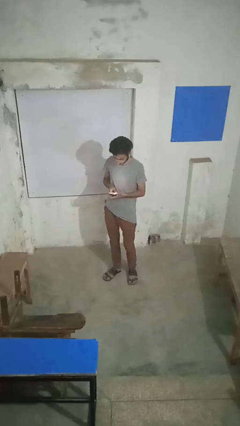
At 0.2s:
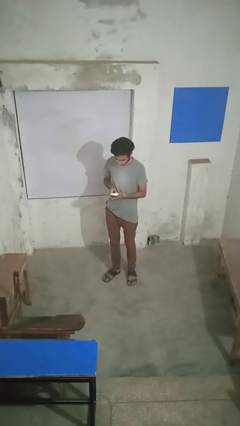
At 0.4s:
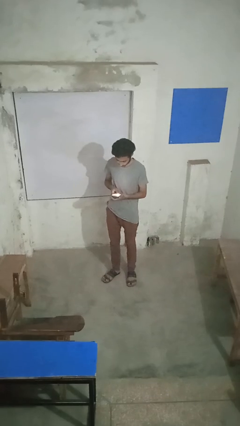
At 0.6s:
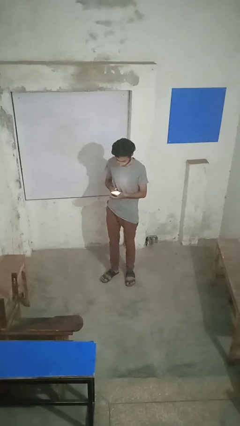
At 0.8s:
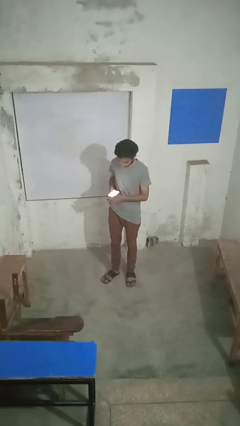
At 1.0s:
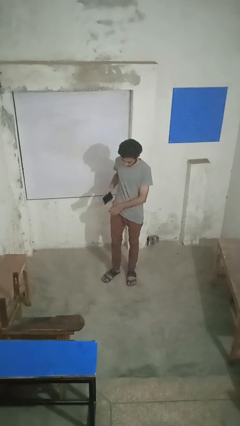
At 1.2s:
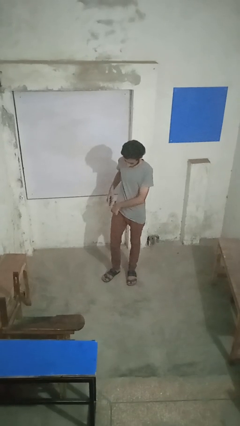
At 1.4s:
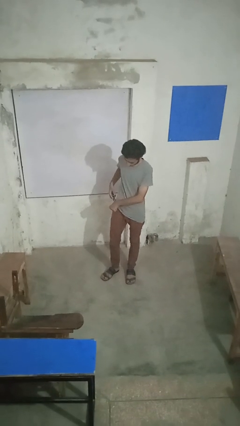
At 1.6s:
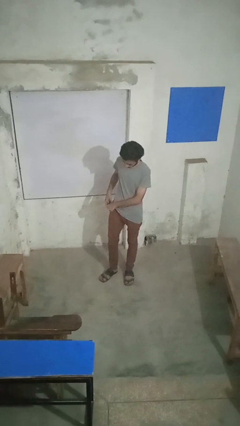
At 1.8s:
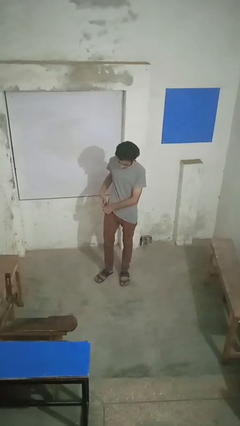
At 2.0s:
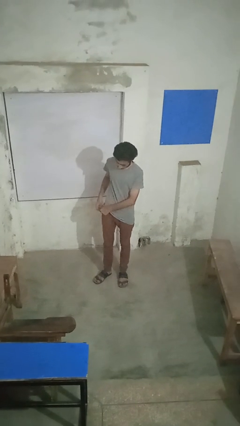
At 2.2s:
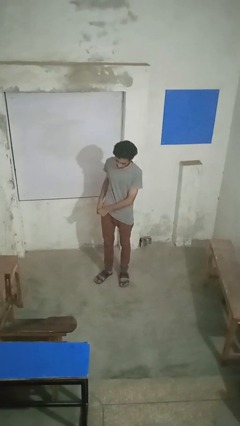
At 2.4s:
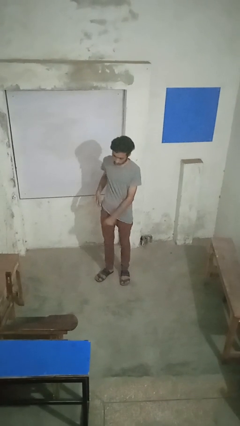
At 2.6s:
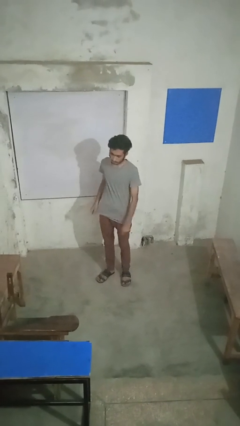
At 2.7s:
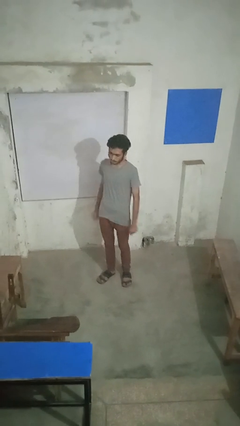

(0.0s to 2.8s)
person puts phone into pocket

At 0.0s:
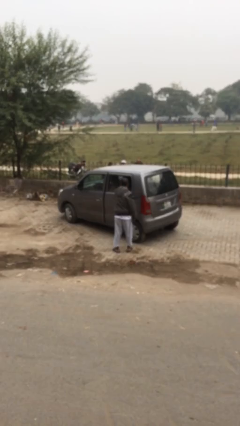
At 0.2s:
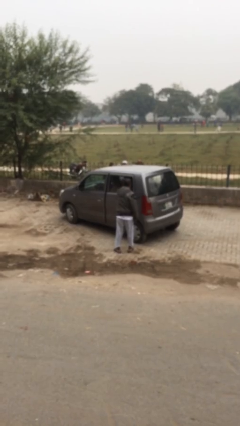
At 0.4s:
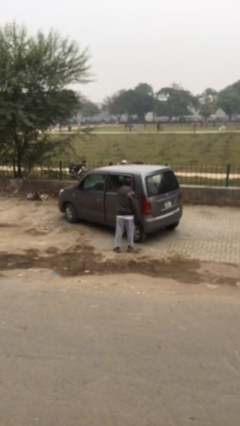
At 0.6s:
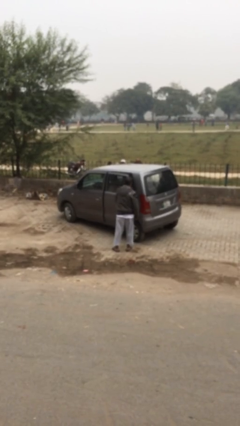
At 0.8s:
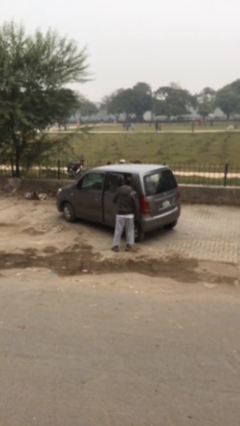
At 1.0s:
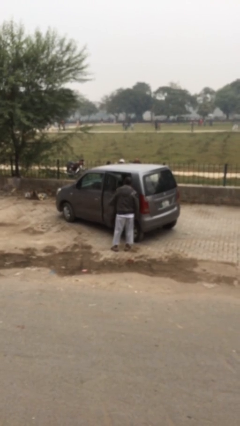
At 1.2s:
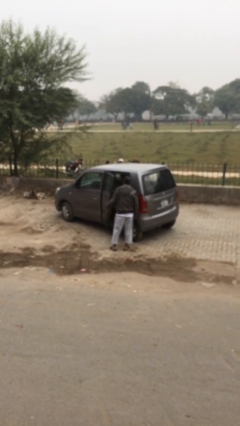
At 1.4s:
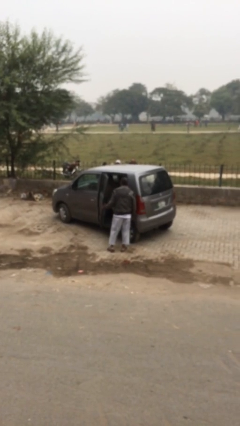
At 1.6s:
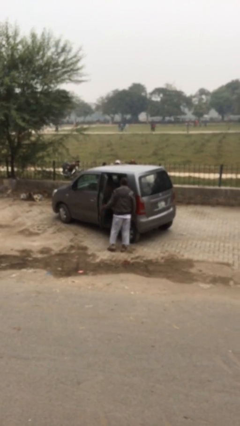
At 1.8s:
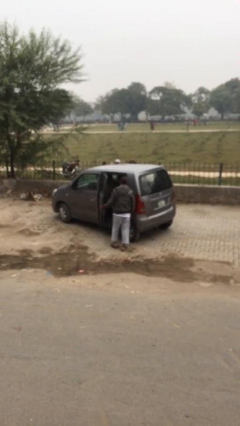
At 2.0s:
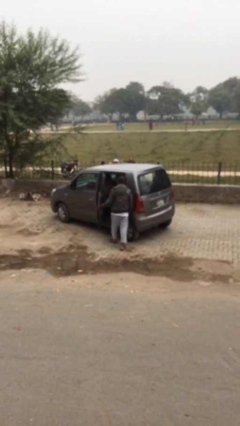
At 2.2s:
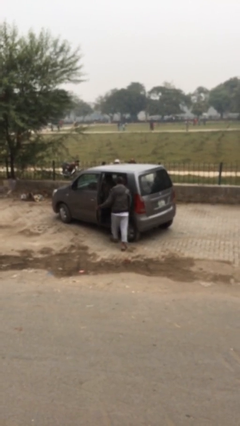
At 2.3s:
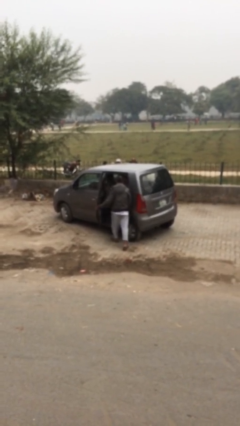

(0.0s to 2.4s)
person opens car door

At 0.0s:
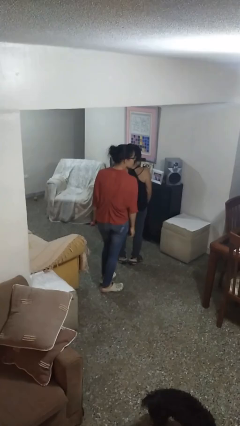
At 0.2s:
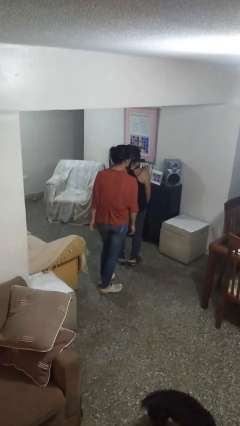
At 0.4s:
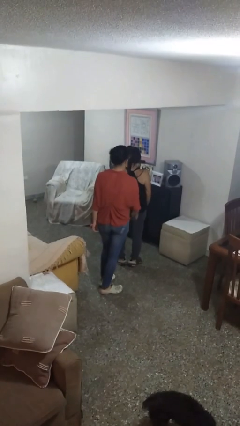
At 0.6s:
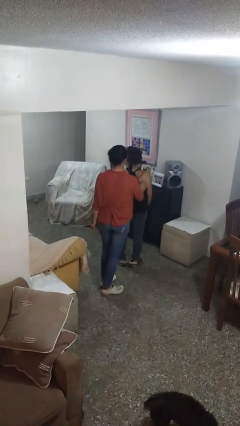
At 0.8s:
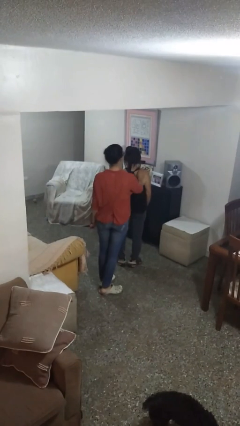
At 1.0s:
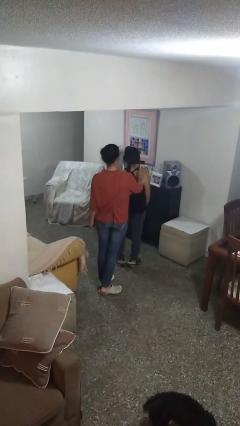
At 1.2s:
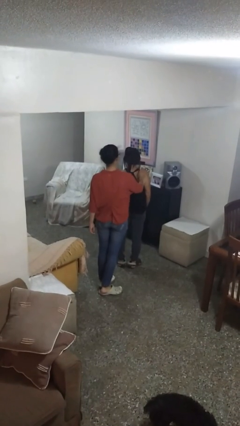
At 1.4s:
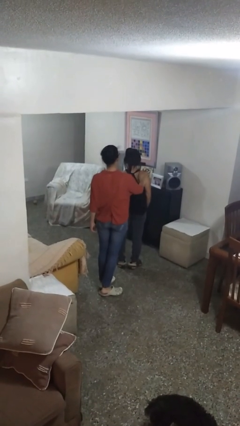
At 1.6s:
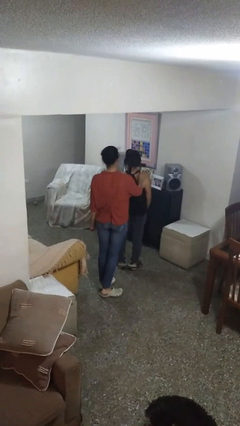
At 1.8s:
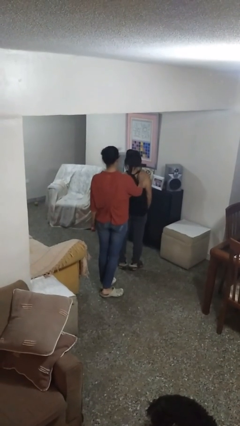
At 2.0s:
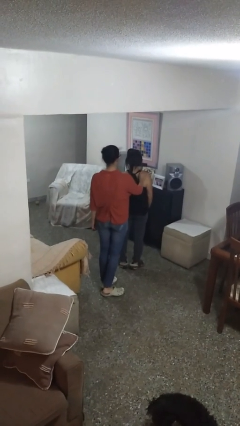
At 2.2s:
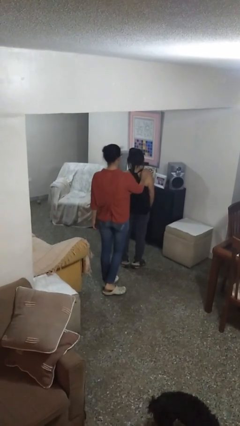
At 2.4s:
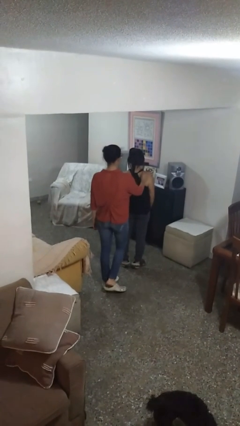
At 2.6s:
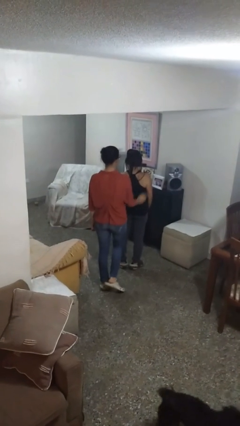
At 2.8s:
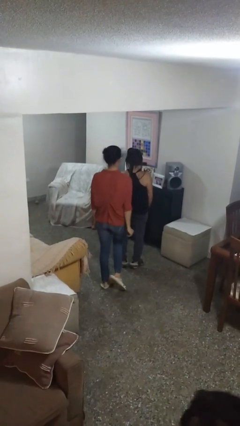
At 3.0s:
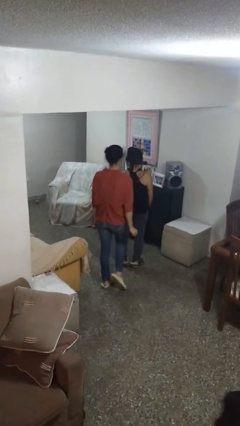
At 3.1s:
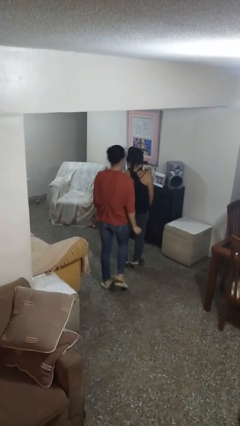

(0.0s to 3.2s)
person touches back of person

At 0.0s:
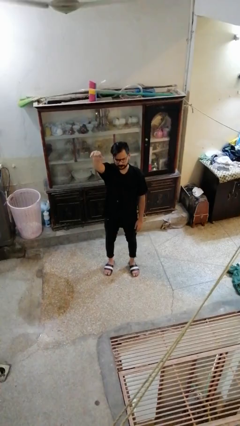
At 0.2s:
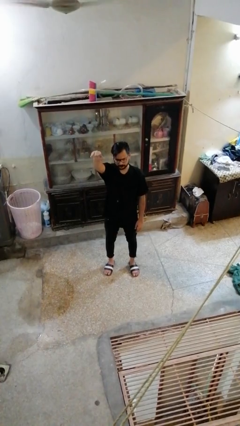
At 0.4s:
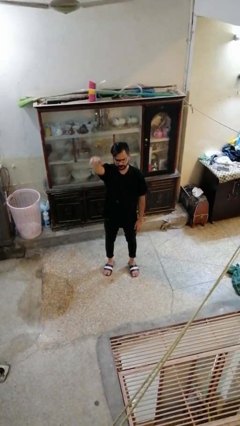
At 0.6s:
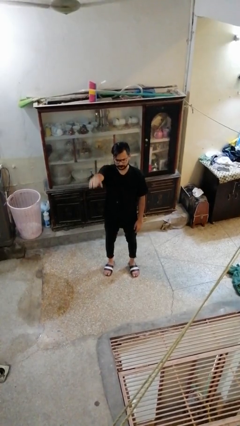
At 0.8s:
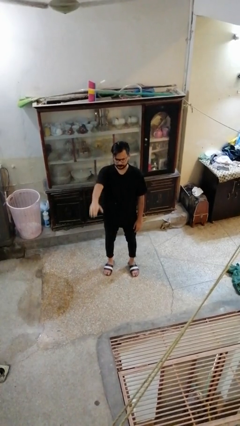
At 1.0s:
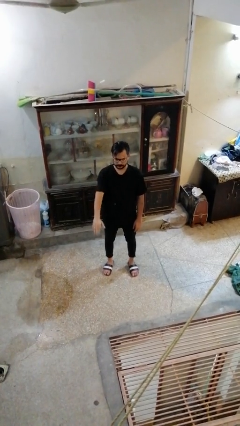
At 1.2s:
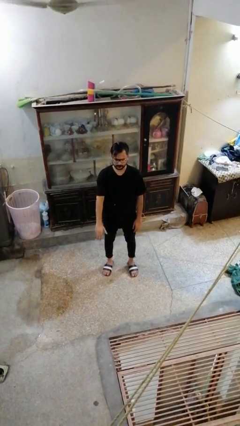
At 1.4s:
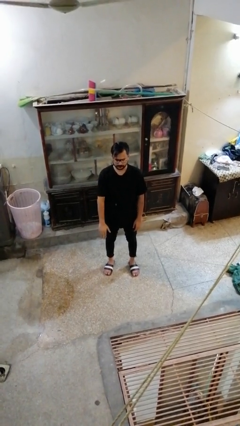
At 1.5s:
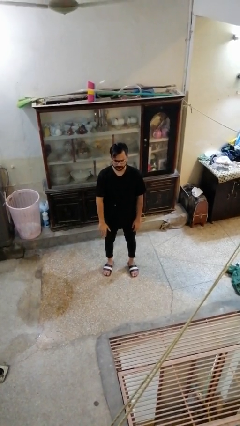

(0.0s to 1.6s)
person gestures swipe down

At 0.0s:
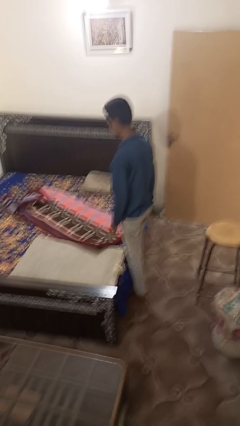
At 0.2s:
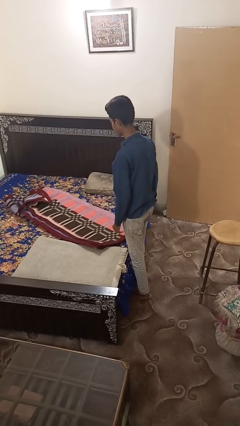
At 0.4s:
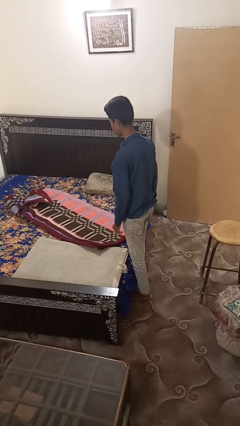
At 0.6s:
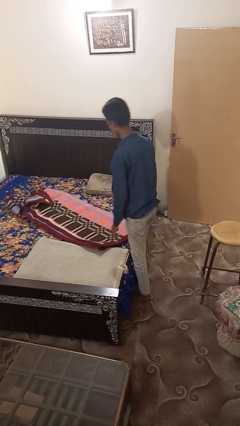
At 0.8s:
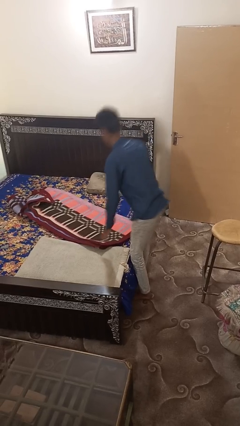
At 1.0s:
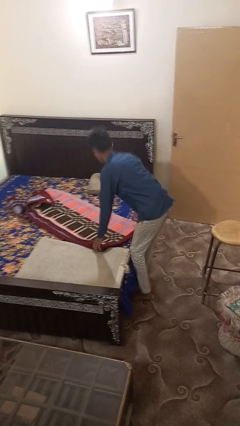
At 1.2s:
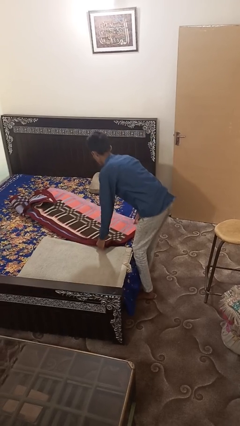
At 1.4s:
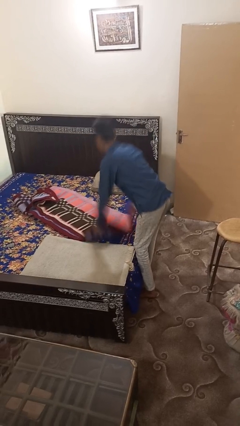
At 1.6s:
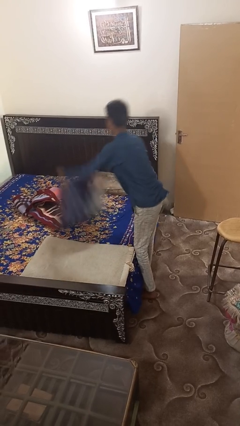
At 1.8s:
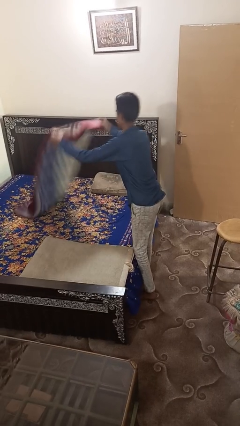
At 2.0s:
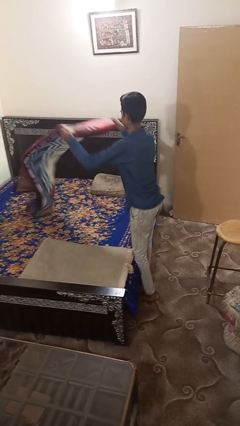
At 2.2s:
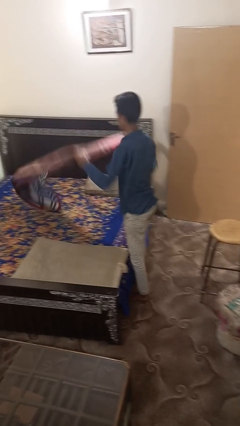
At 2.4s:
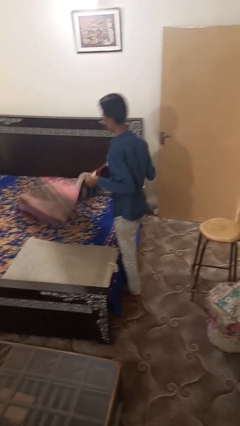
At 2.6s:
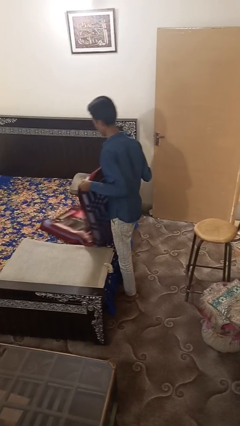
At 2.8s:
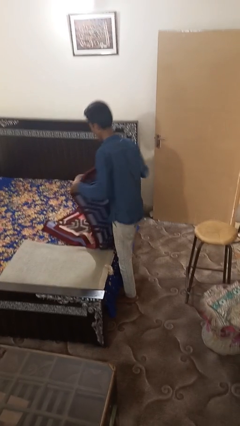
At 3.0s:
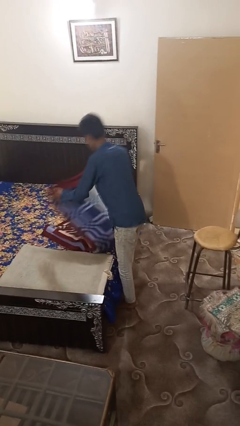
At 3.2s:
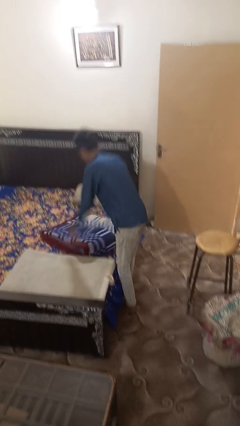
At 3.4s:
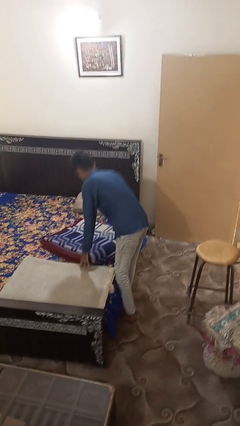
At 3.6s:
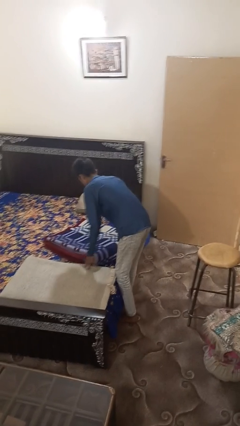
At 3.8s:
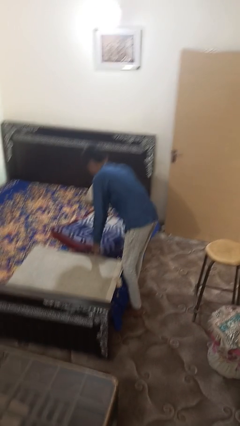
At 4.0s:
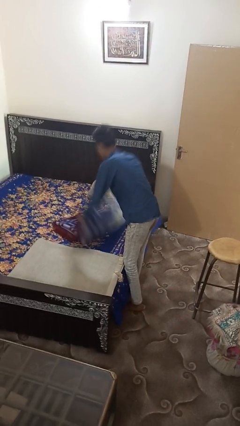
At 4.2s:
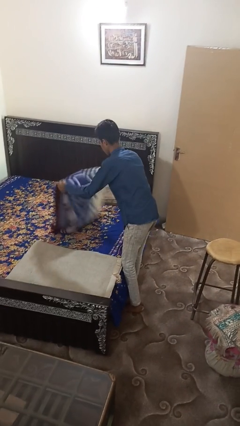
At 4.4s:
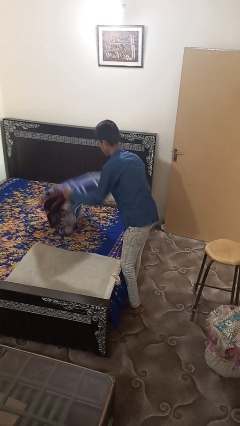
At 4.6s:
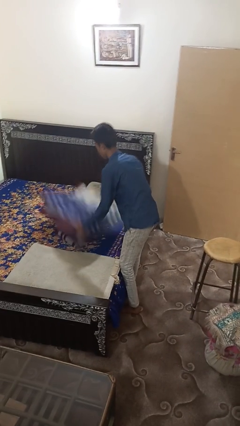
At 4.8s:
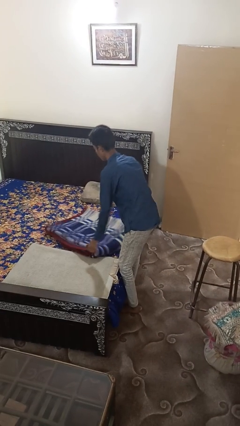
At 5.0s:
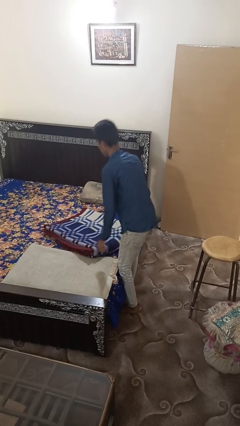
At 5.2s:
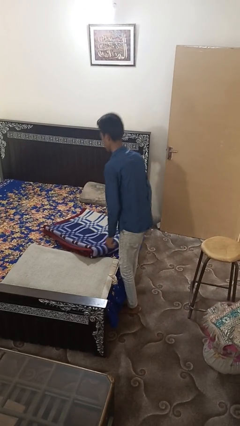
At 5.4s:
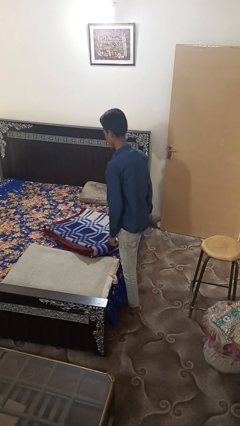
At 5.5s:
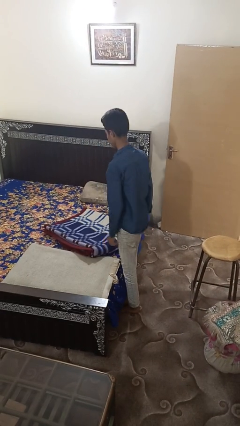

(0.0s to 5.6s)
person folds blanket

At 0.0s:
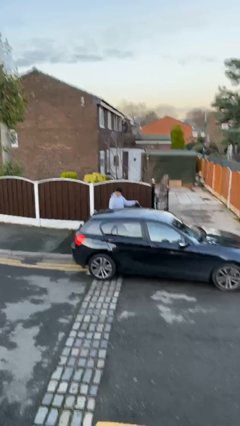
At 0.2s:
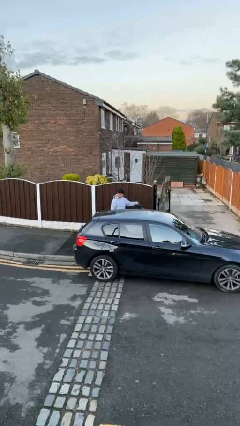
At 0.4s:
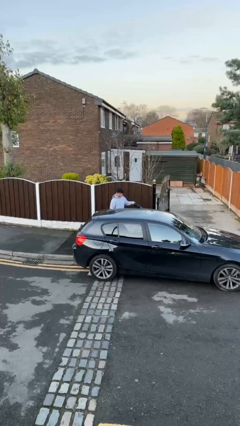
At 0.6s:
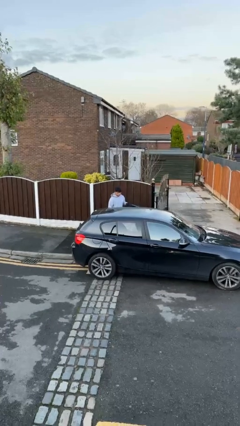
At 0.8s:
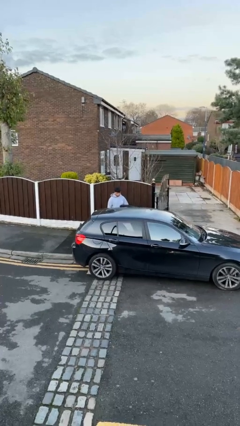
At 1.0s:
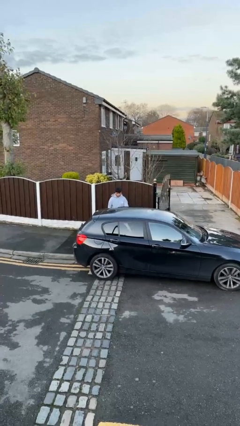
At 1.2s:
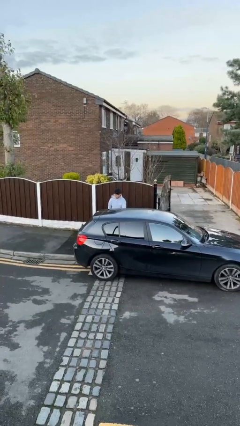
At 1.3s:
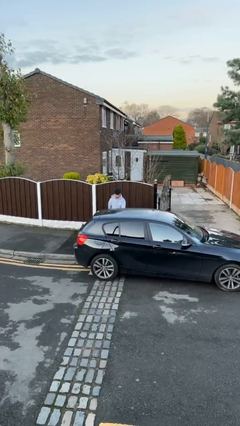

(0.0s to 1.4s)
person closes car door
